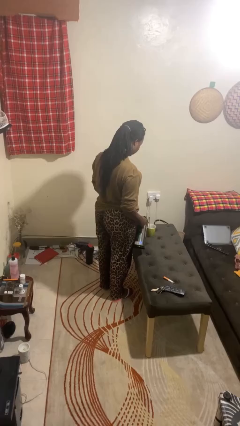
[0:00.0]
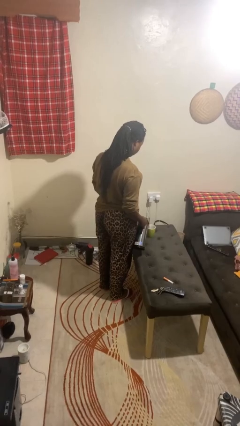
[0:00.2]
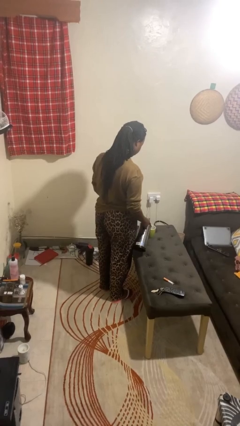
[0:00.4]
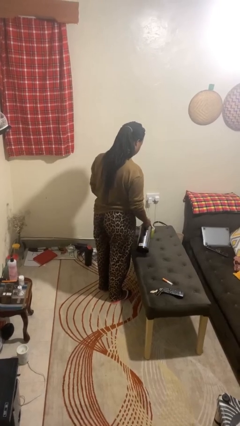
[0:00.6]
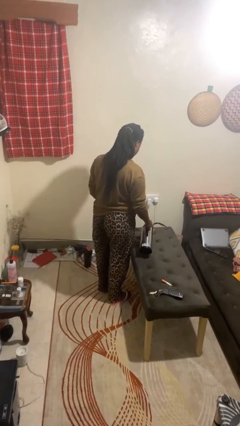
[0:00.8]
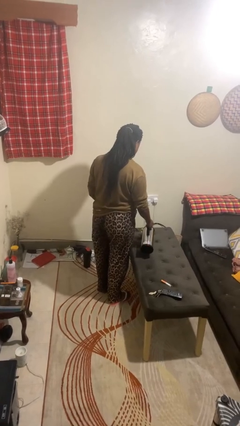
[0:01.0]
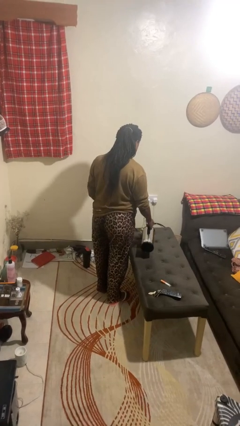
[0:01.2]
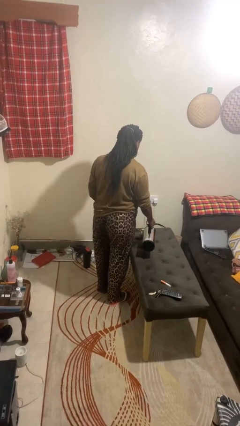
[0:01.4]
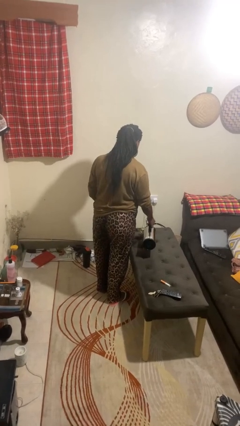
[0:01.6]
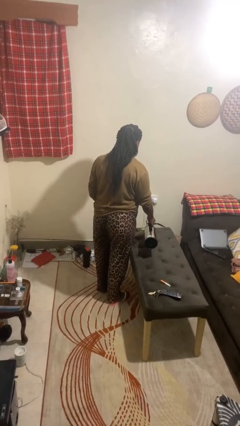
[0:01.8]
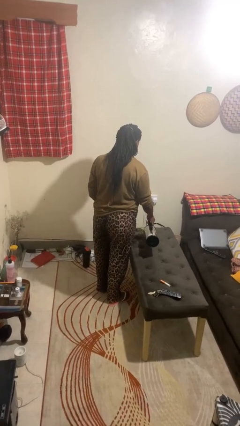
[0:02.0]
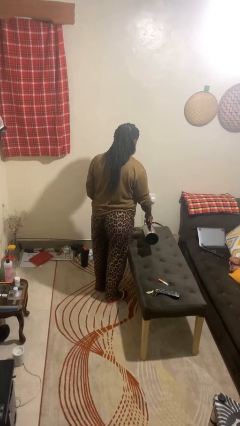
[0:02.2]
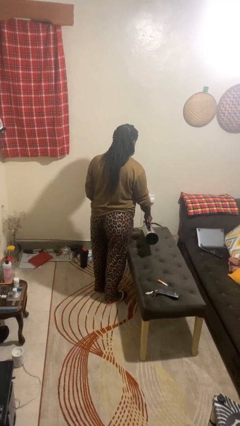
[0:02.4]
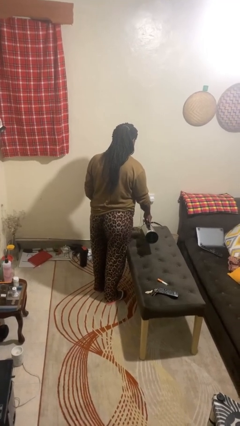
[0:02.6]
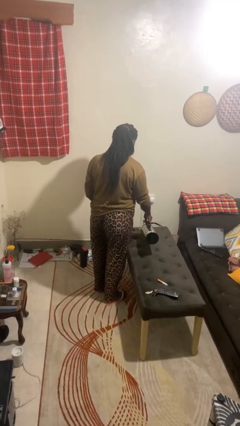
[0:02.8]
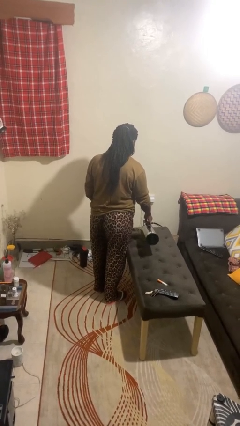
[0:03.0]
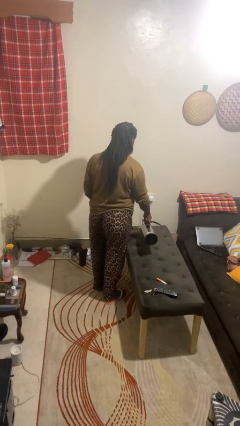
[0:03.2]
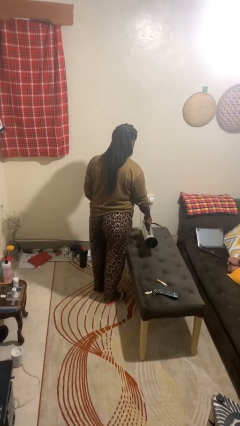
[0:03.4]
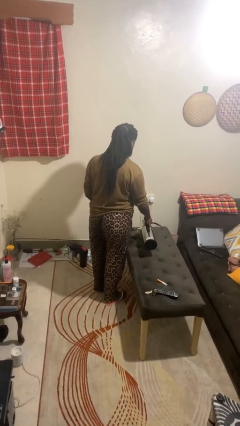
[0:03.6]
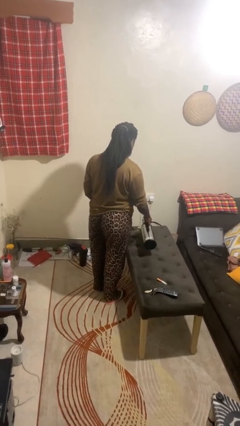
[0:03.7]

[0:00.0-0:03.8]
person pours coffee into mug

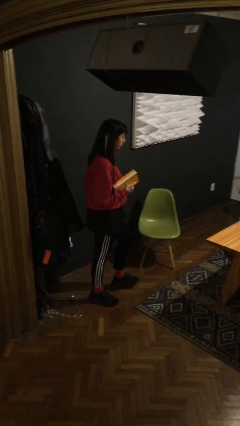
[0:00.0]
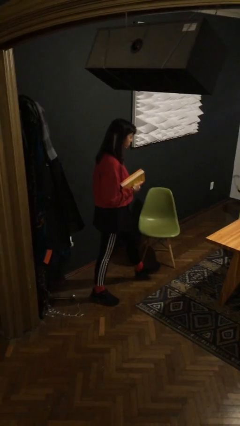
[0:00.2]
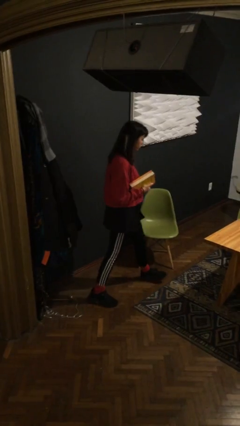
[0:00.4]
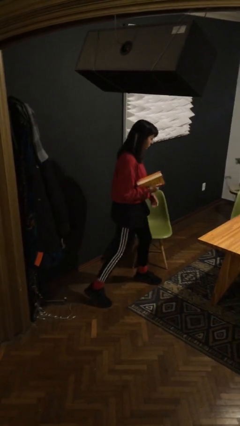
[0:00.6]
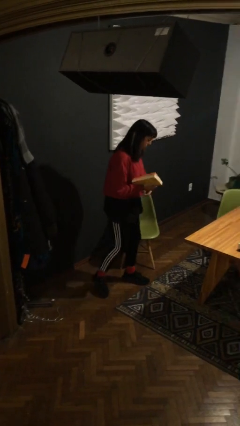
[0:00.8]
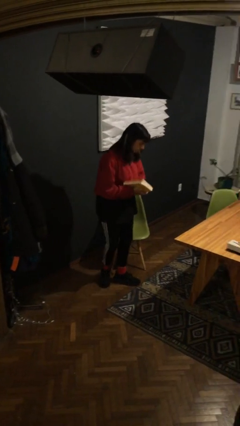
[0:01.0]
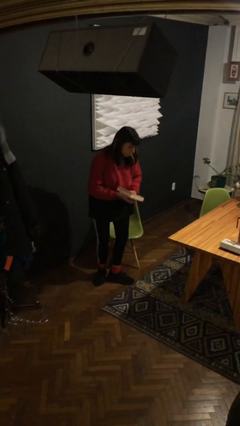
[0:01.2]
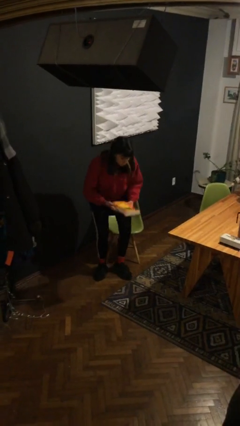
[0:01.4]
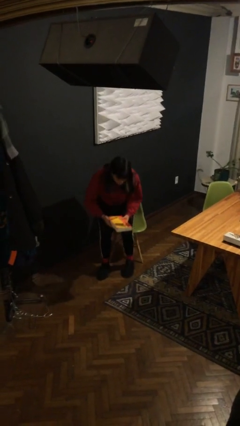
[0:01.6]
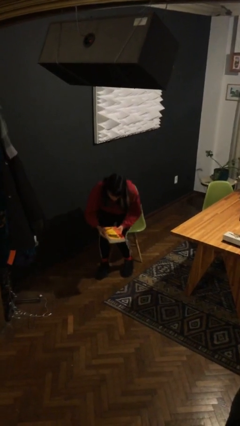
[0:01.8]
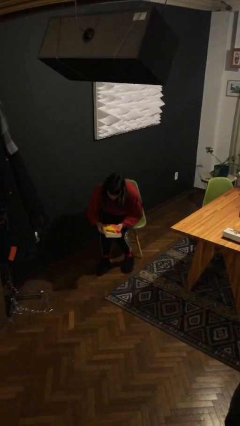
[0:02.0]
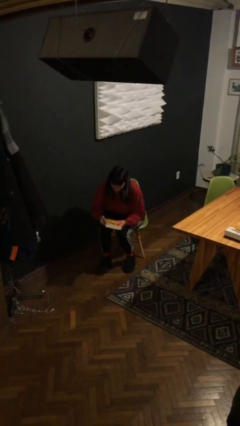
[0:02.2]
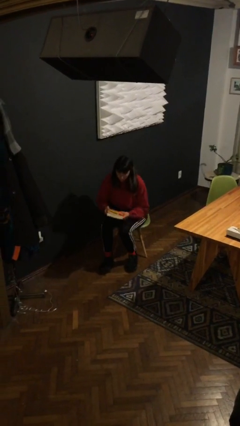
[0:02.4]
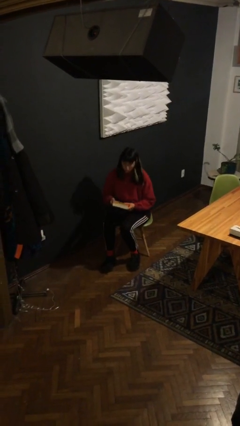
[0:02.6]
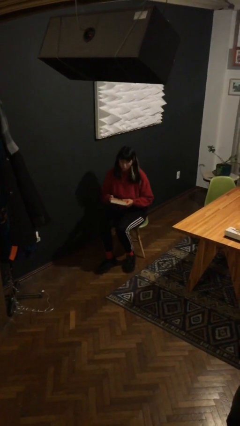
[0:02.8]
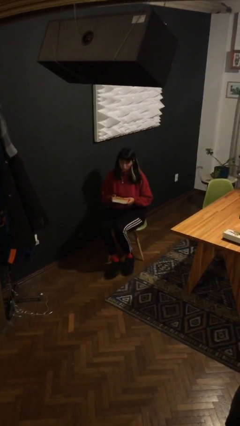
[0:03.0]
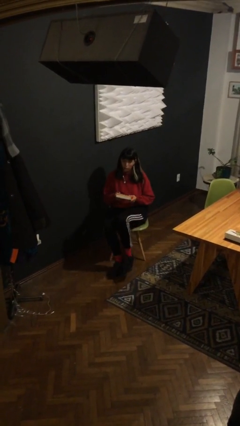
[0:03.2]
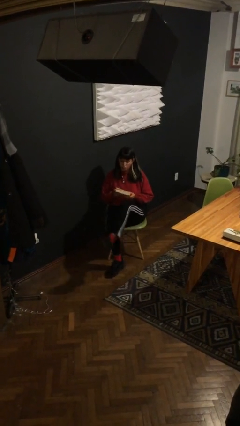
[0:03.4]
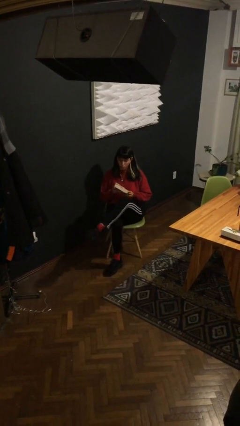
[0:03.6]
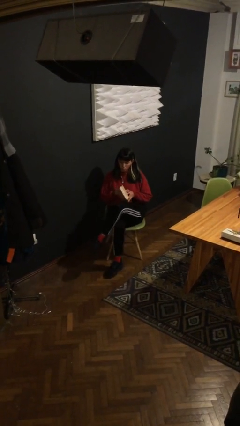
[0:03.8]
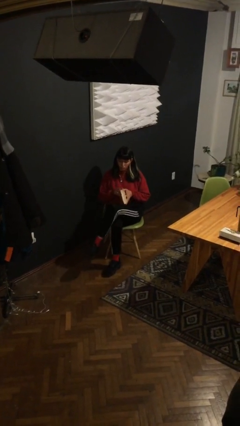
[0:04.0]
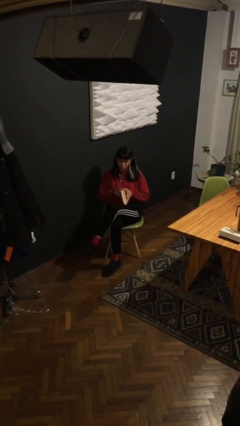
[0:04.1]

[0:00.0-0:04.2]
person sits down

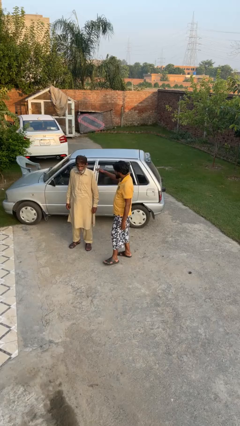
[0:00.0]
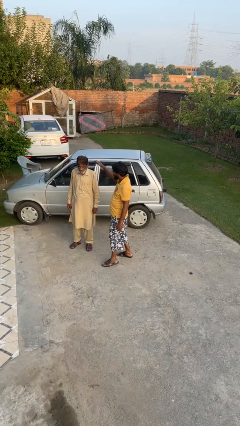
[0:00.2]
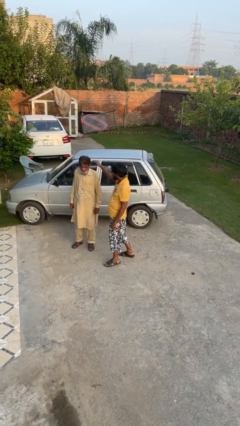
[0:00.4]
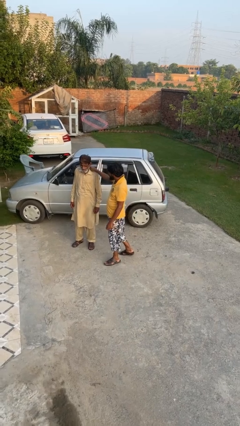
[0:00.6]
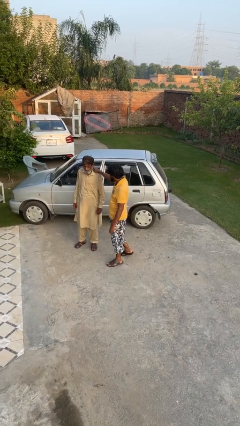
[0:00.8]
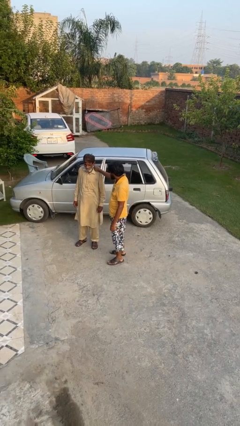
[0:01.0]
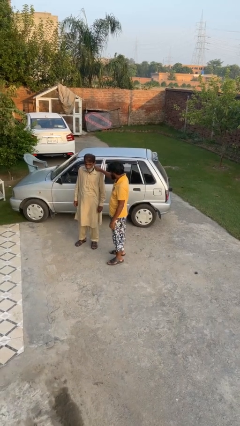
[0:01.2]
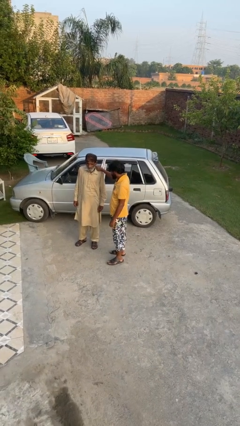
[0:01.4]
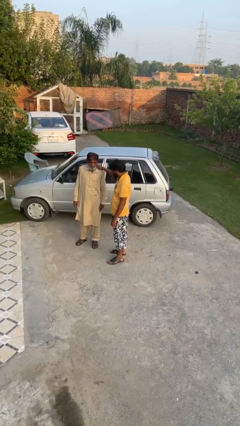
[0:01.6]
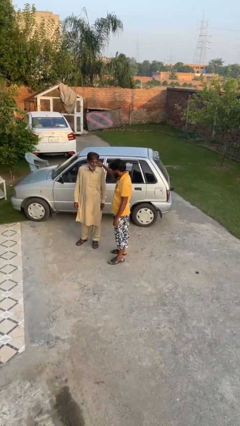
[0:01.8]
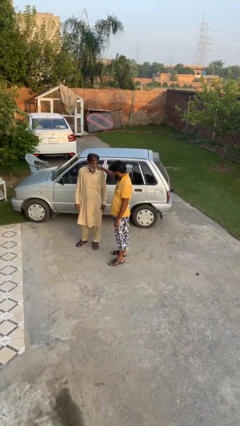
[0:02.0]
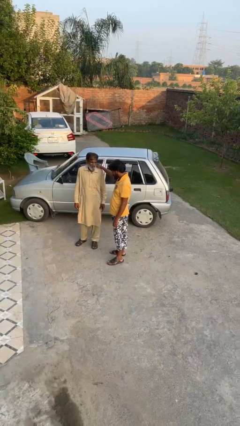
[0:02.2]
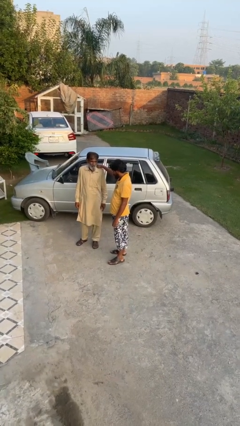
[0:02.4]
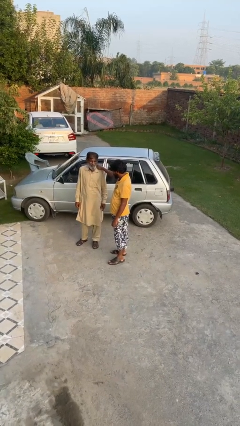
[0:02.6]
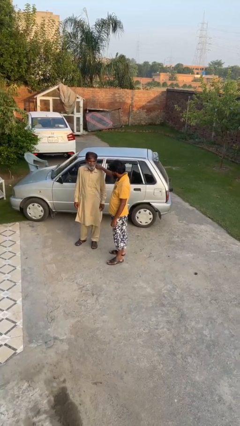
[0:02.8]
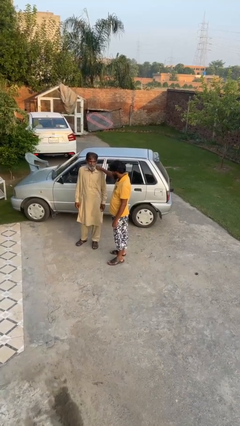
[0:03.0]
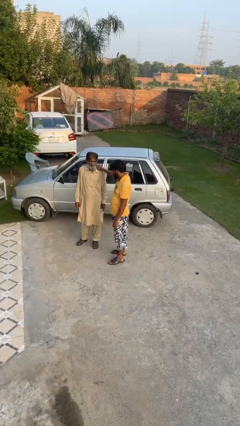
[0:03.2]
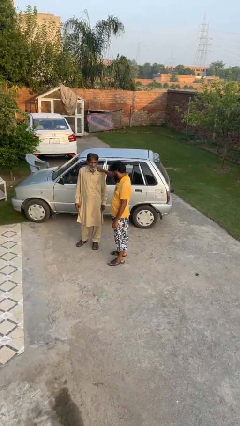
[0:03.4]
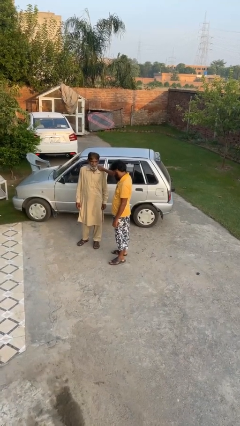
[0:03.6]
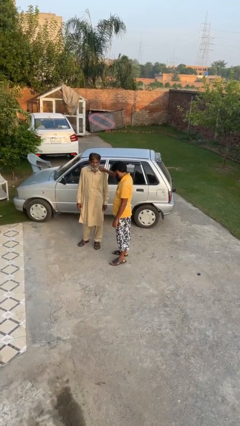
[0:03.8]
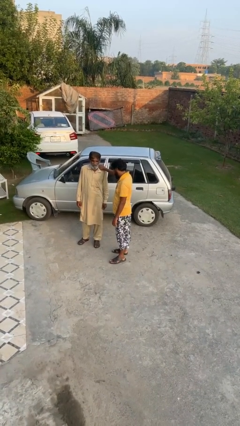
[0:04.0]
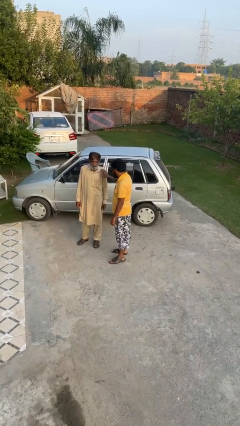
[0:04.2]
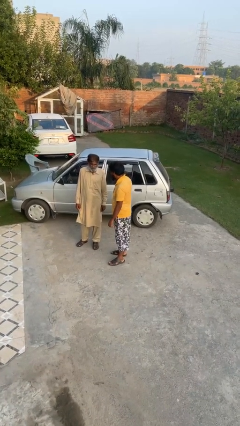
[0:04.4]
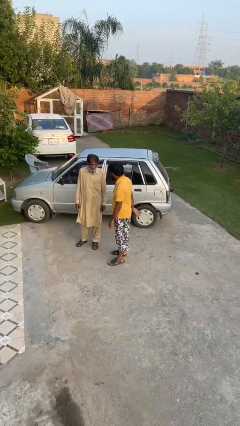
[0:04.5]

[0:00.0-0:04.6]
person pounds shoulders of person

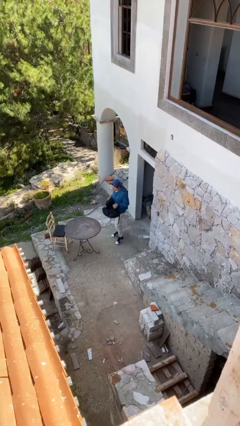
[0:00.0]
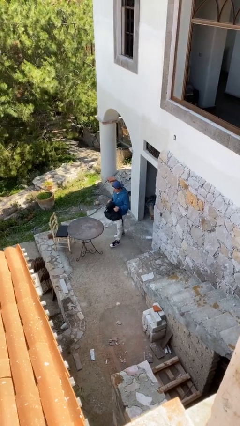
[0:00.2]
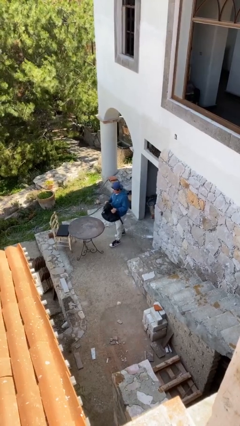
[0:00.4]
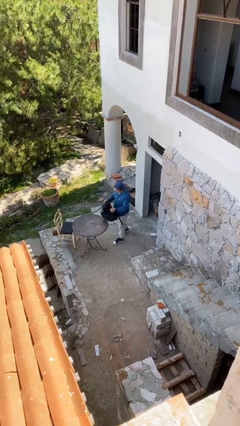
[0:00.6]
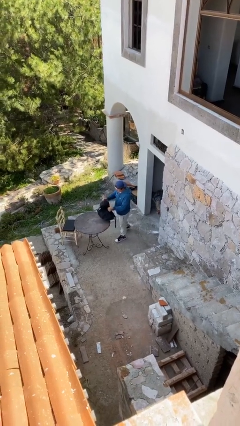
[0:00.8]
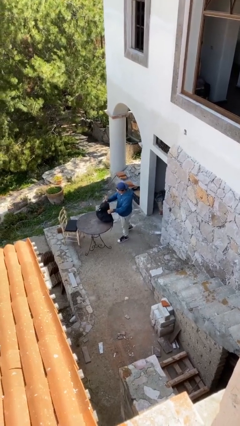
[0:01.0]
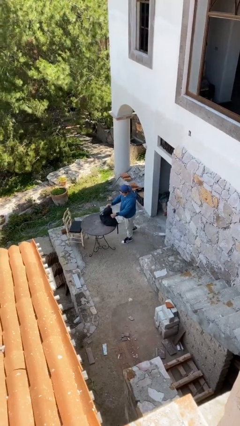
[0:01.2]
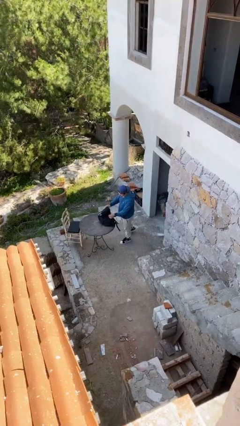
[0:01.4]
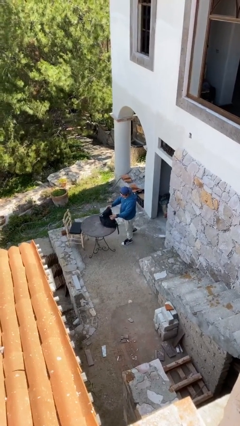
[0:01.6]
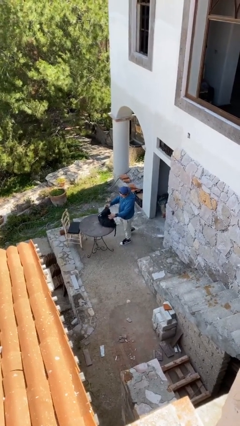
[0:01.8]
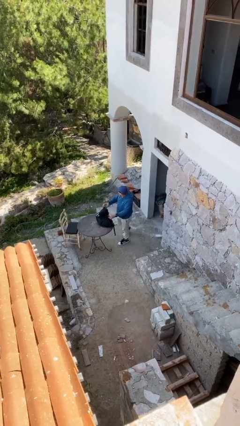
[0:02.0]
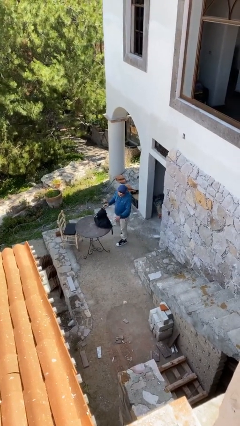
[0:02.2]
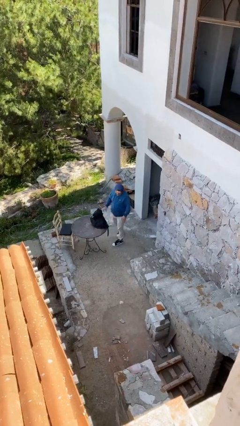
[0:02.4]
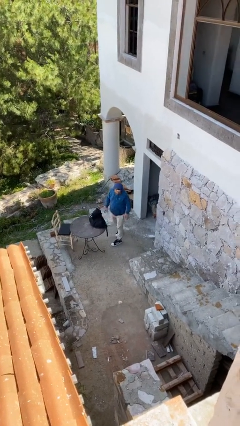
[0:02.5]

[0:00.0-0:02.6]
person puts down object on table

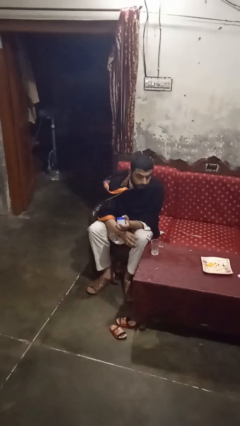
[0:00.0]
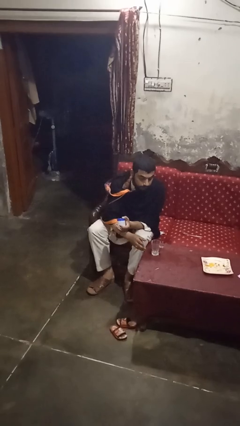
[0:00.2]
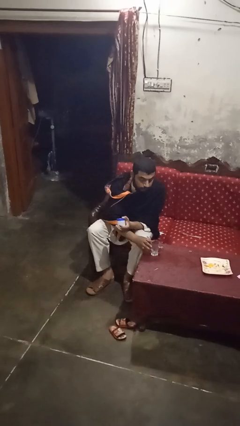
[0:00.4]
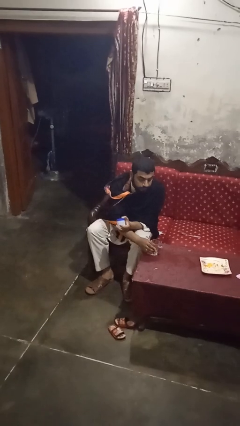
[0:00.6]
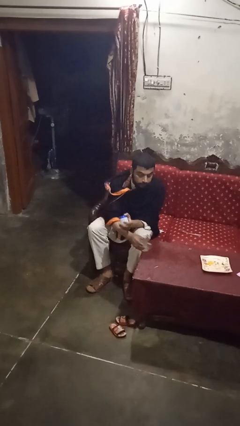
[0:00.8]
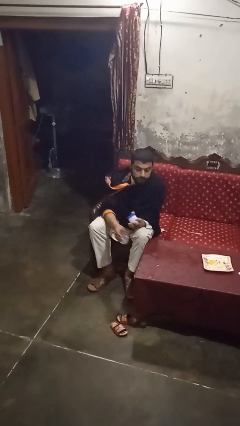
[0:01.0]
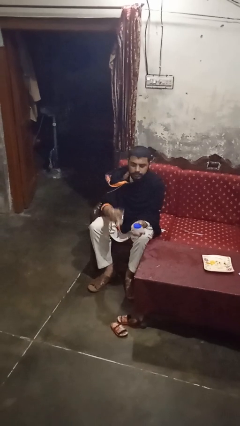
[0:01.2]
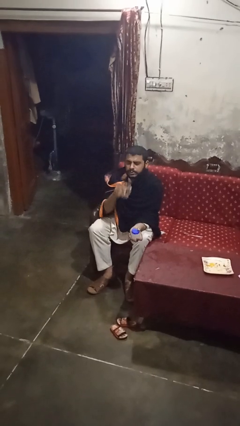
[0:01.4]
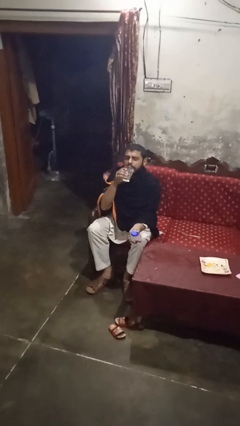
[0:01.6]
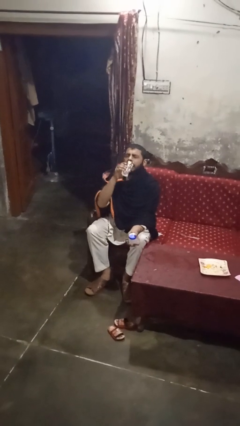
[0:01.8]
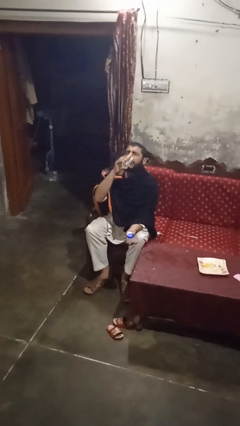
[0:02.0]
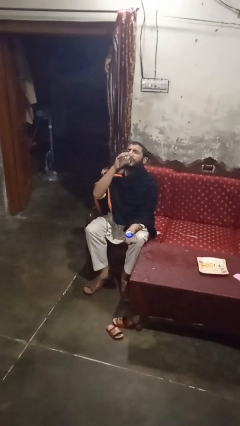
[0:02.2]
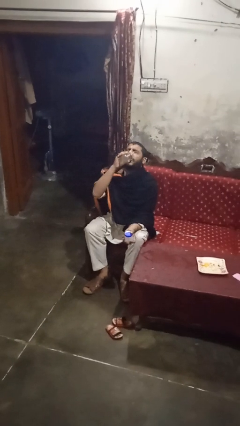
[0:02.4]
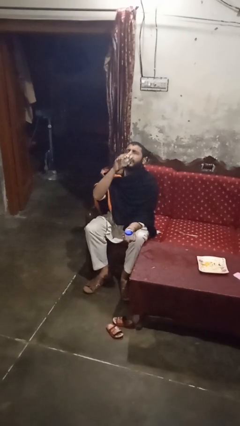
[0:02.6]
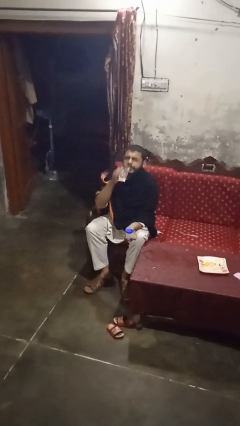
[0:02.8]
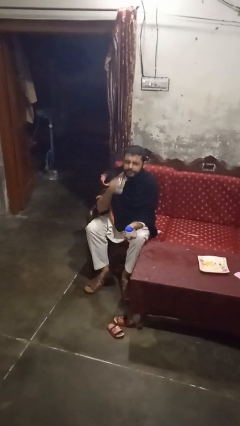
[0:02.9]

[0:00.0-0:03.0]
person drinks from cup
